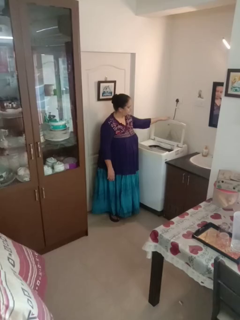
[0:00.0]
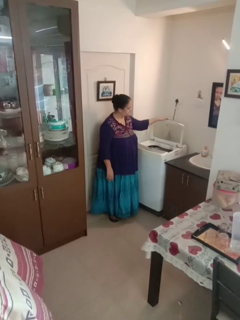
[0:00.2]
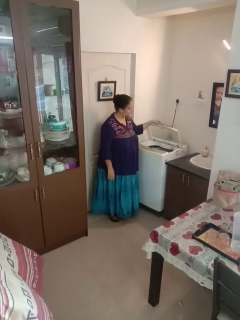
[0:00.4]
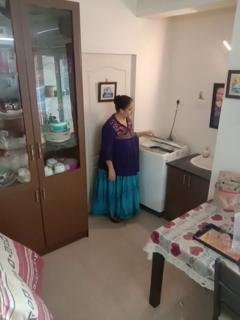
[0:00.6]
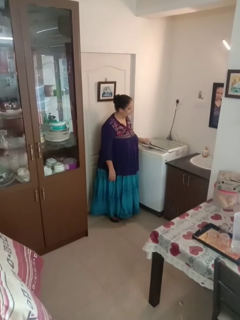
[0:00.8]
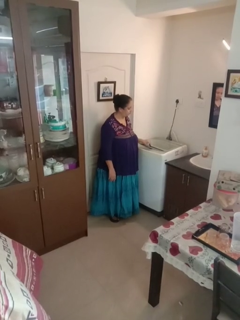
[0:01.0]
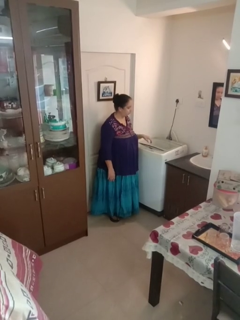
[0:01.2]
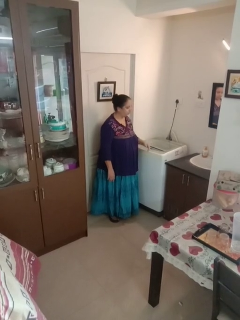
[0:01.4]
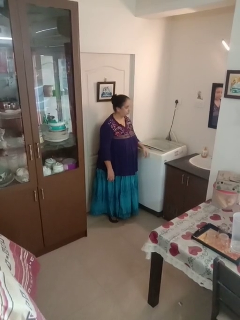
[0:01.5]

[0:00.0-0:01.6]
person closes clothes washer

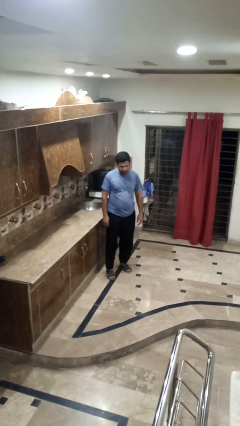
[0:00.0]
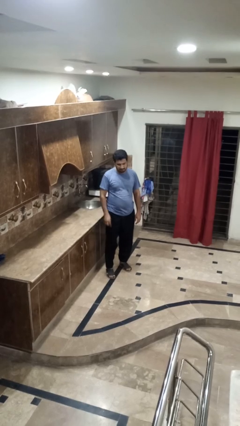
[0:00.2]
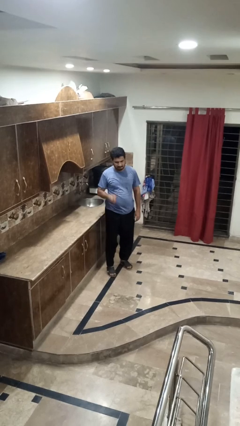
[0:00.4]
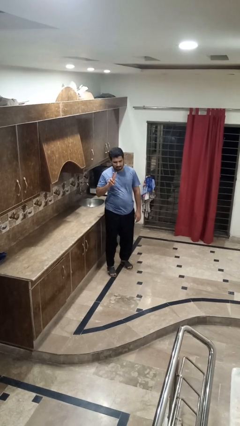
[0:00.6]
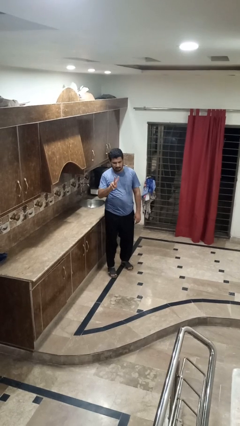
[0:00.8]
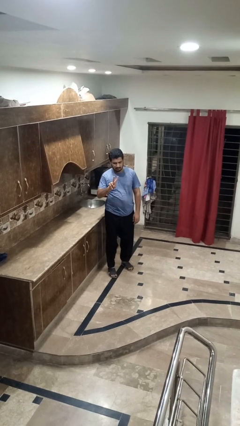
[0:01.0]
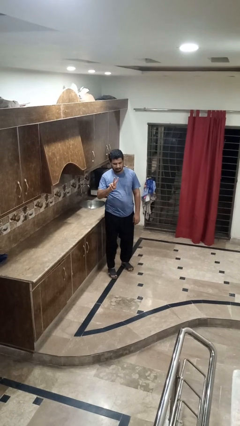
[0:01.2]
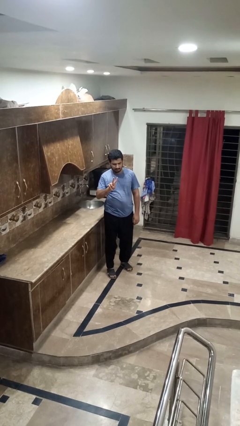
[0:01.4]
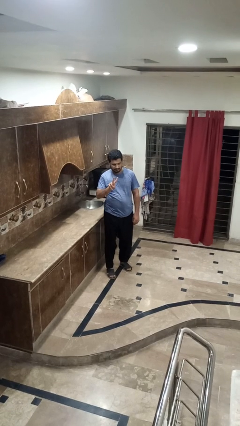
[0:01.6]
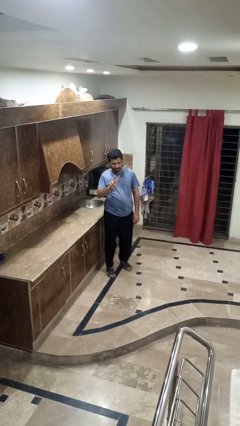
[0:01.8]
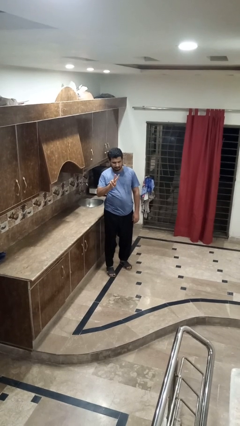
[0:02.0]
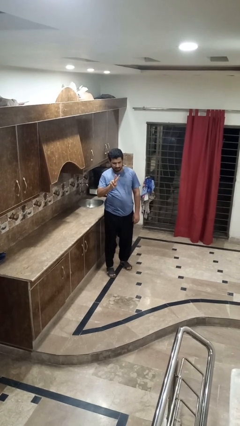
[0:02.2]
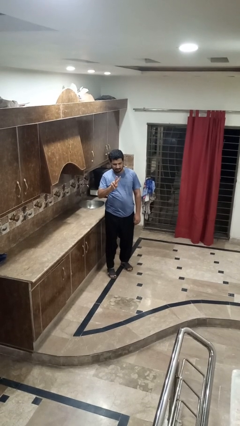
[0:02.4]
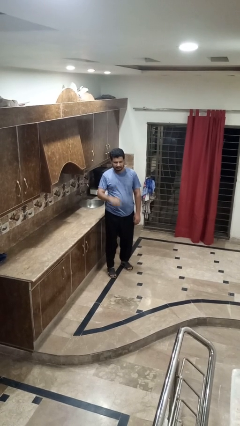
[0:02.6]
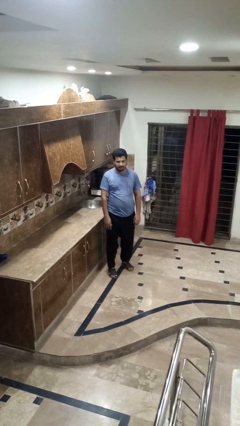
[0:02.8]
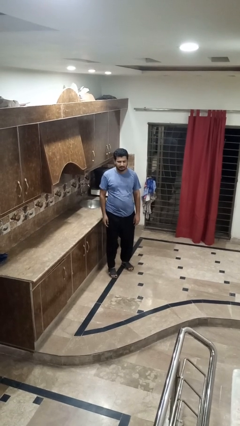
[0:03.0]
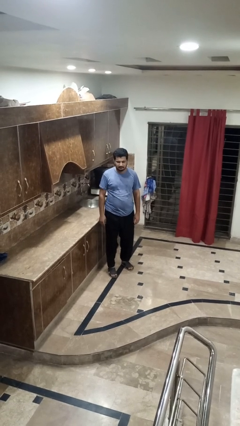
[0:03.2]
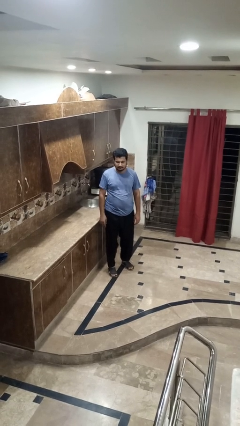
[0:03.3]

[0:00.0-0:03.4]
person gestures peace

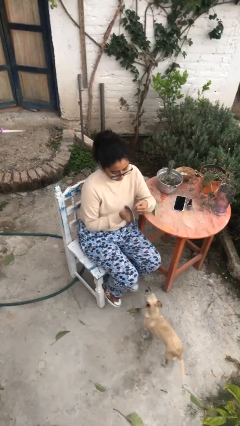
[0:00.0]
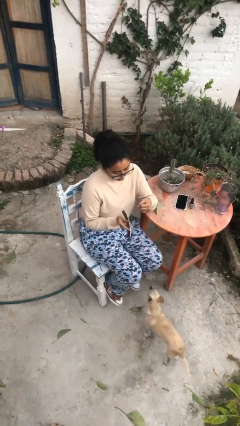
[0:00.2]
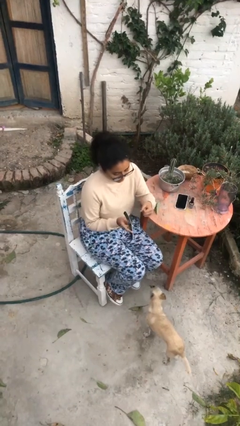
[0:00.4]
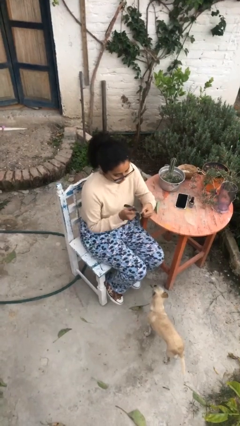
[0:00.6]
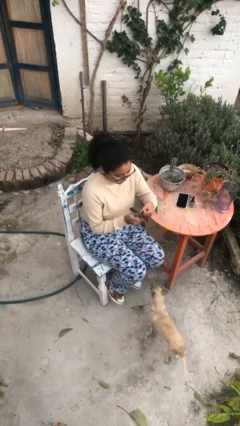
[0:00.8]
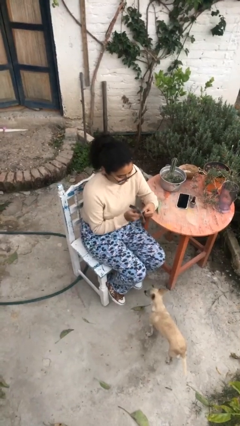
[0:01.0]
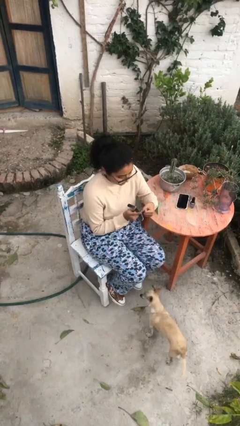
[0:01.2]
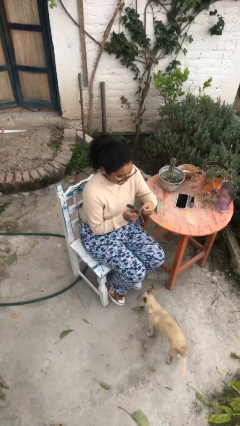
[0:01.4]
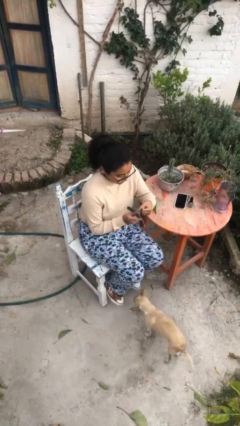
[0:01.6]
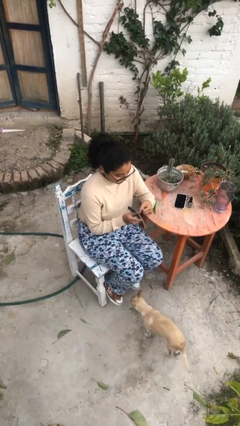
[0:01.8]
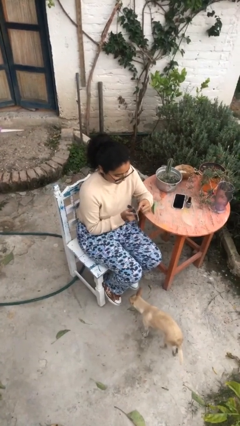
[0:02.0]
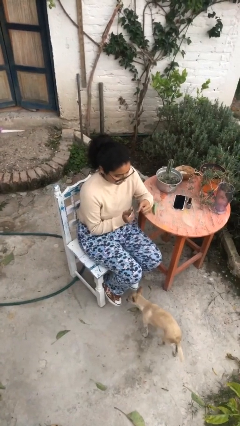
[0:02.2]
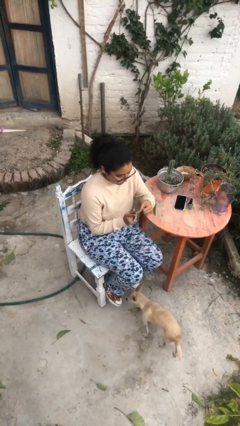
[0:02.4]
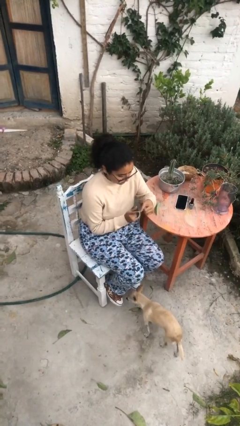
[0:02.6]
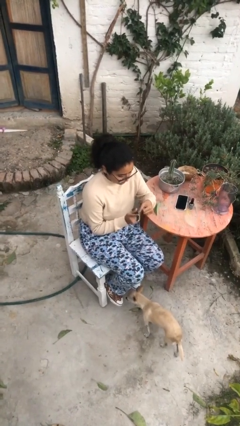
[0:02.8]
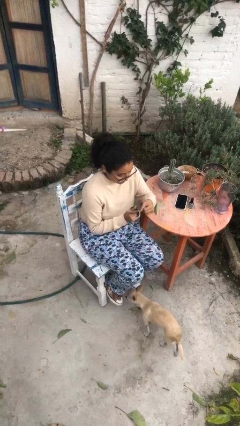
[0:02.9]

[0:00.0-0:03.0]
person files fingernails

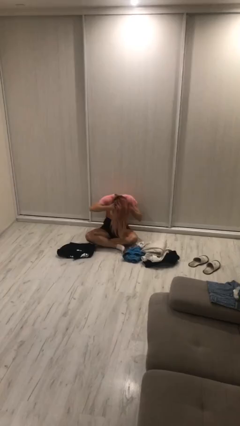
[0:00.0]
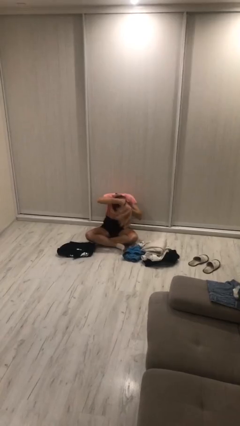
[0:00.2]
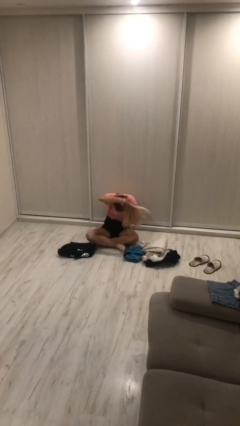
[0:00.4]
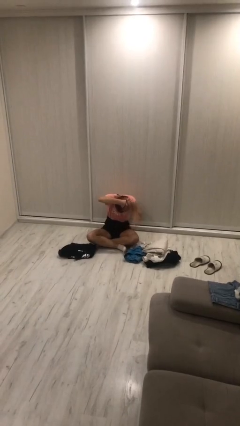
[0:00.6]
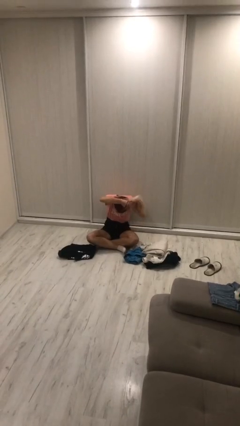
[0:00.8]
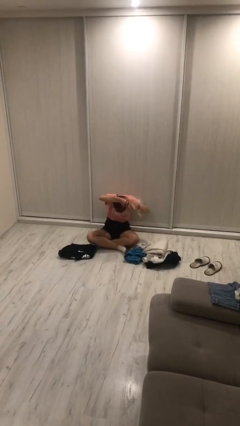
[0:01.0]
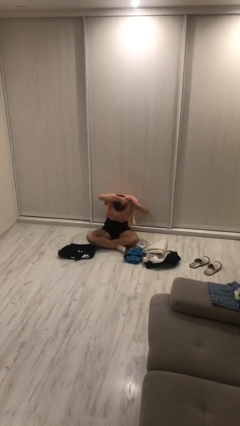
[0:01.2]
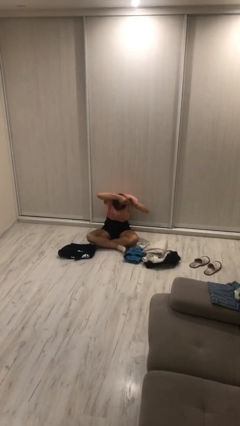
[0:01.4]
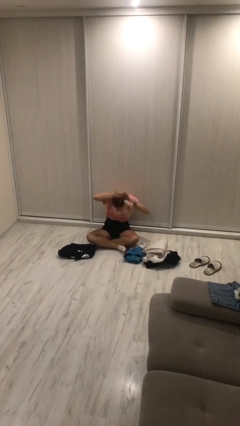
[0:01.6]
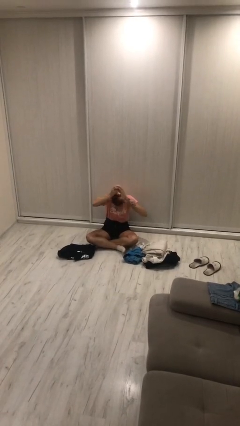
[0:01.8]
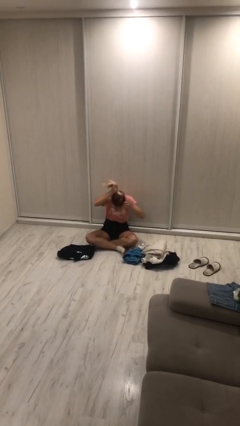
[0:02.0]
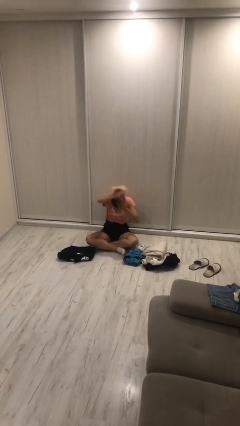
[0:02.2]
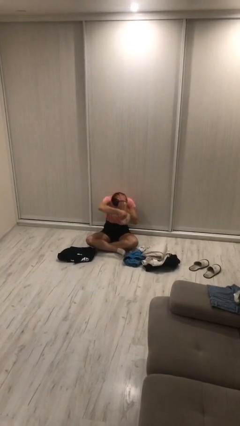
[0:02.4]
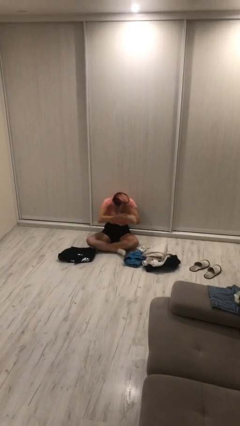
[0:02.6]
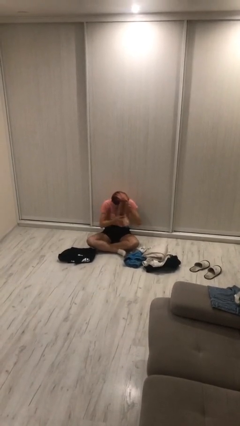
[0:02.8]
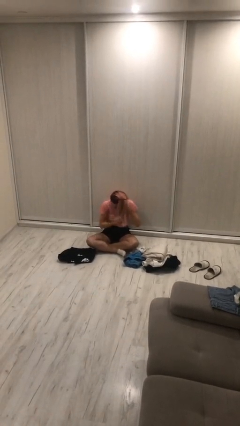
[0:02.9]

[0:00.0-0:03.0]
person puts hair in ponytail

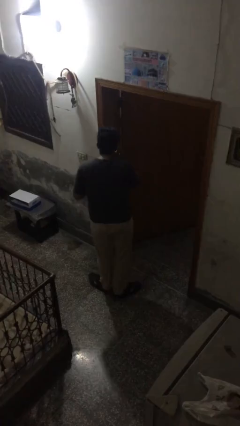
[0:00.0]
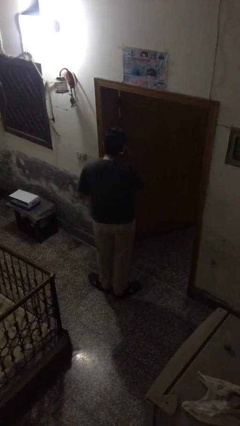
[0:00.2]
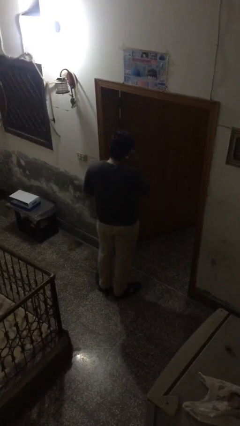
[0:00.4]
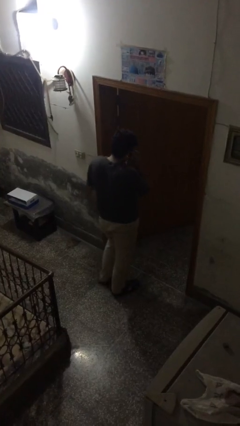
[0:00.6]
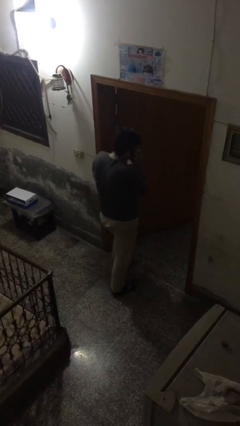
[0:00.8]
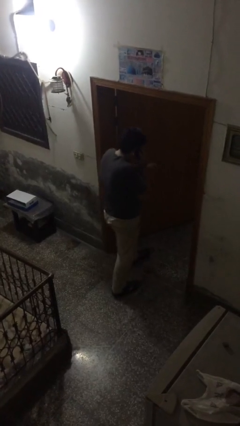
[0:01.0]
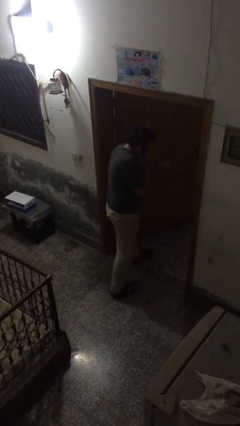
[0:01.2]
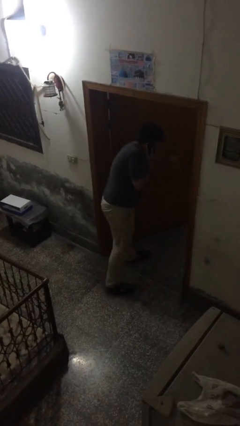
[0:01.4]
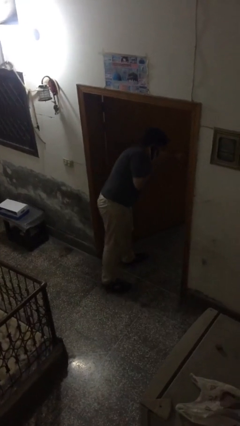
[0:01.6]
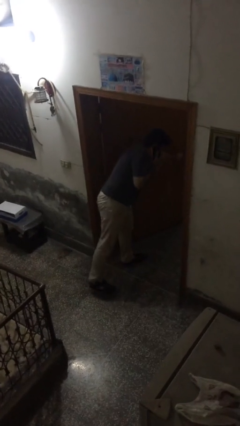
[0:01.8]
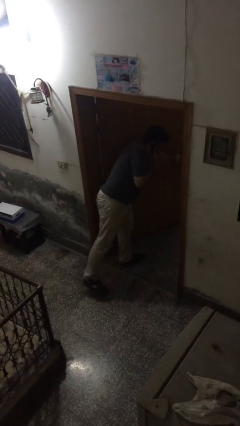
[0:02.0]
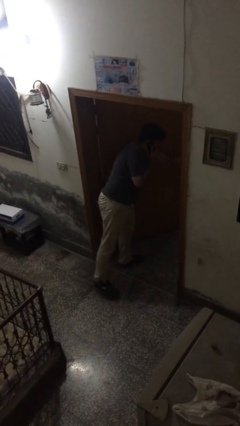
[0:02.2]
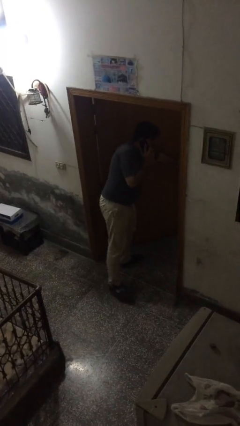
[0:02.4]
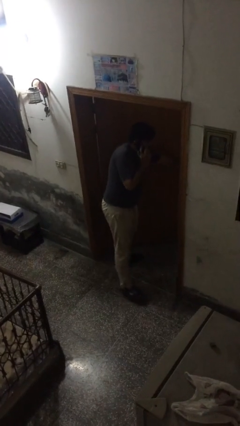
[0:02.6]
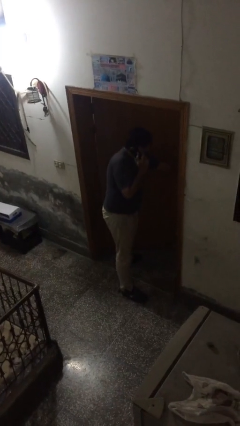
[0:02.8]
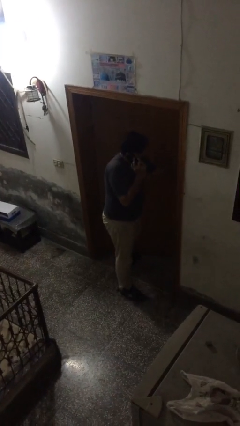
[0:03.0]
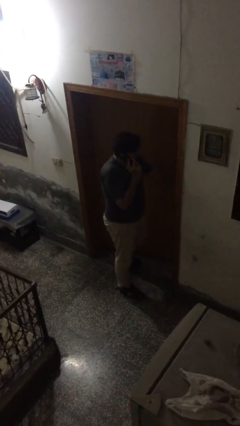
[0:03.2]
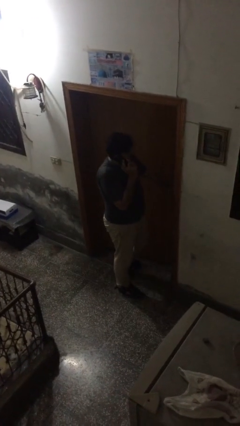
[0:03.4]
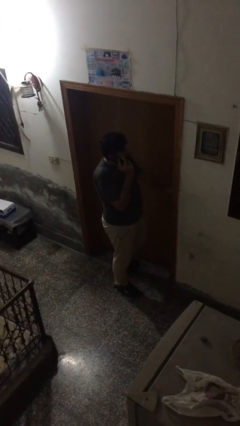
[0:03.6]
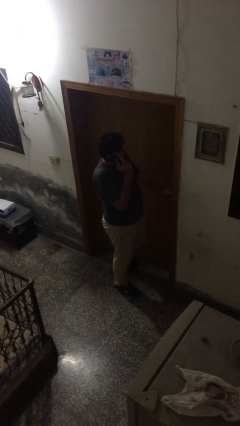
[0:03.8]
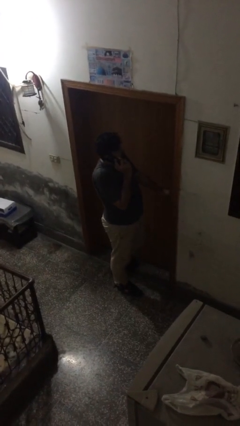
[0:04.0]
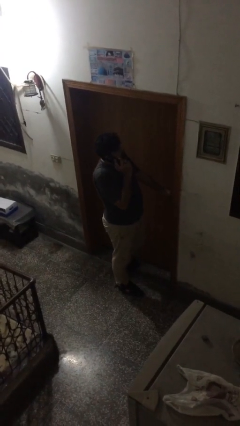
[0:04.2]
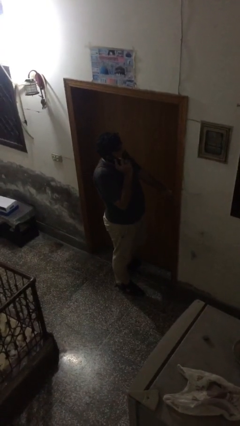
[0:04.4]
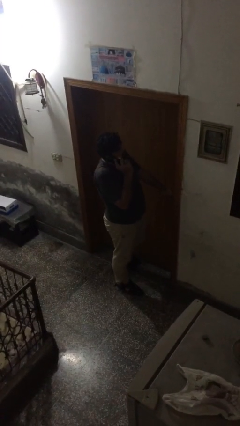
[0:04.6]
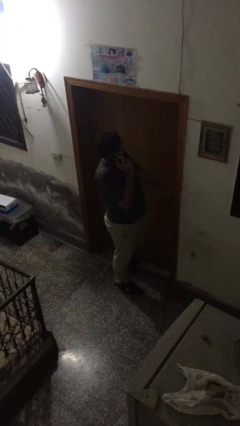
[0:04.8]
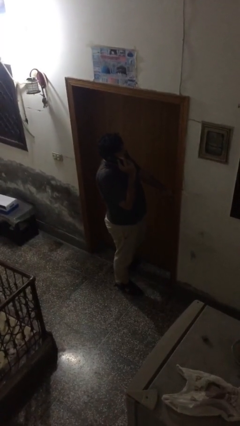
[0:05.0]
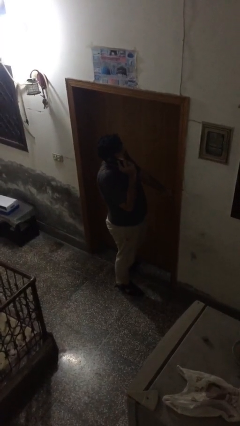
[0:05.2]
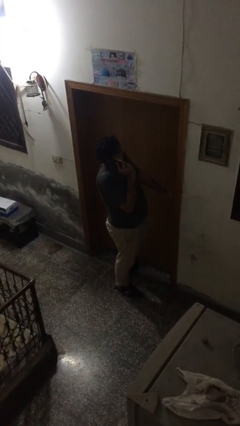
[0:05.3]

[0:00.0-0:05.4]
person closes facility door

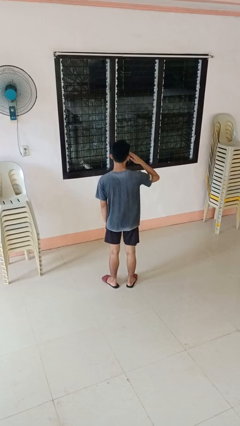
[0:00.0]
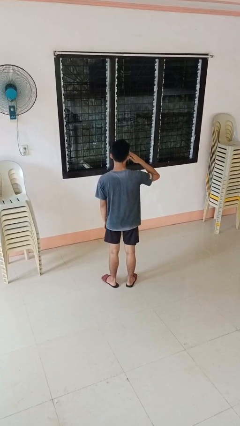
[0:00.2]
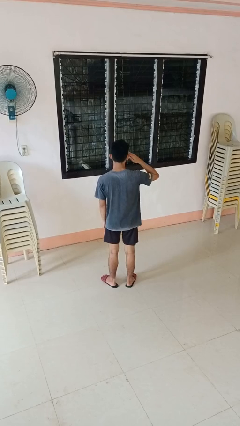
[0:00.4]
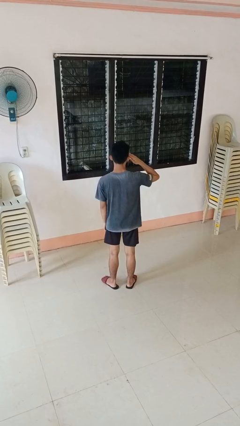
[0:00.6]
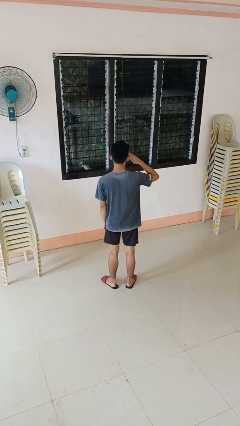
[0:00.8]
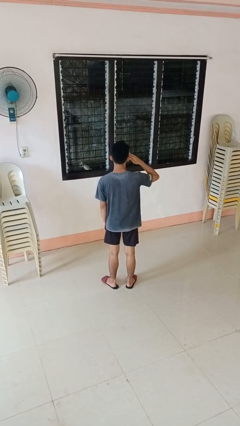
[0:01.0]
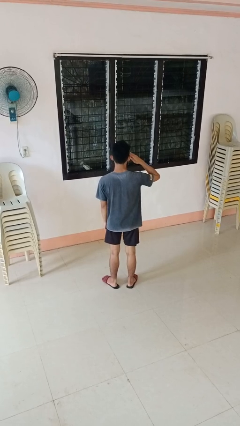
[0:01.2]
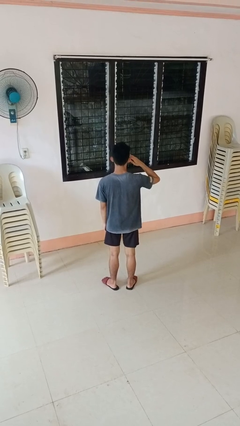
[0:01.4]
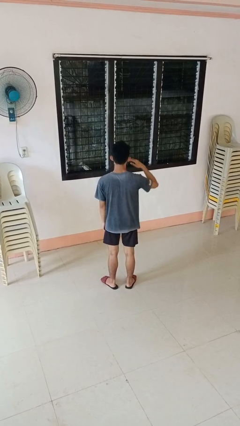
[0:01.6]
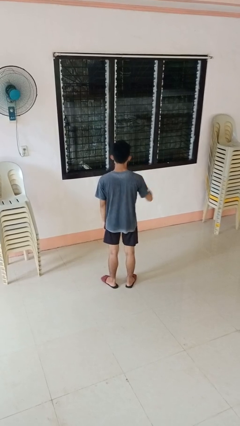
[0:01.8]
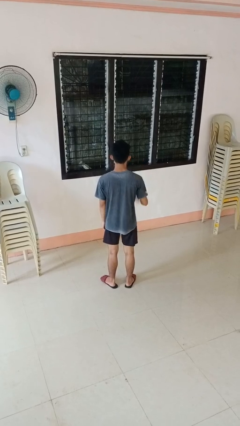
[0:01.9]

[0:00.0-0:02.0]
person salutes
